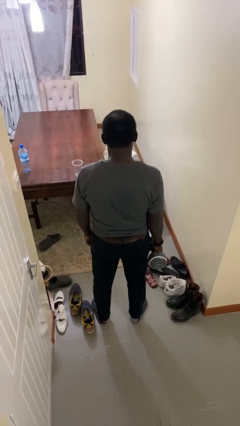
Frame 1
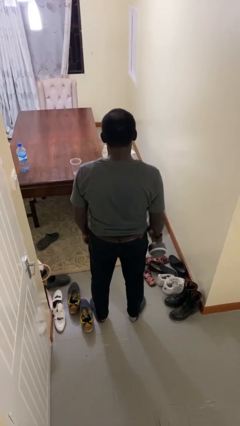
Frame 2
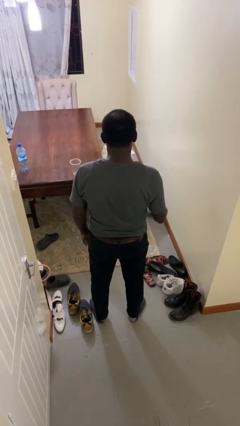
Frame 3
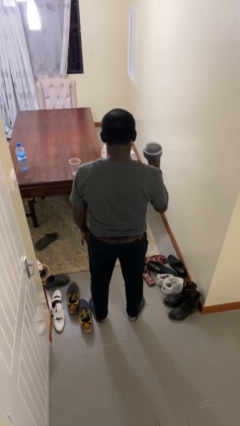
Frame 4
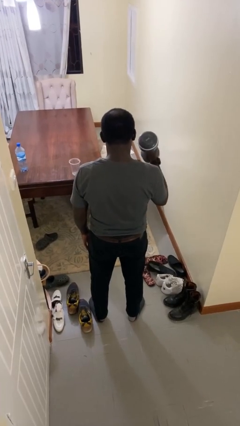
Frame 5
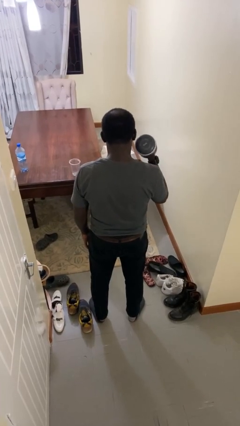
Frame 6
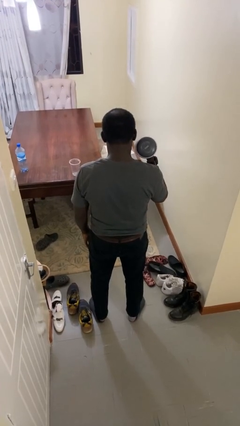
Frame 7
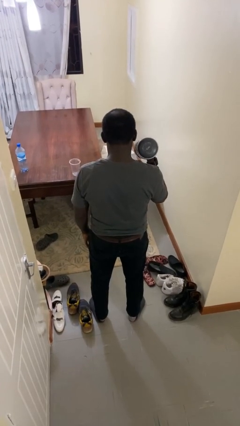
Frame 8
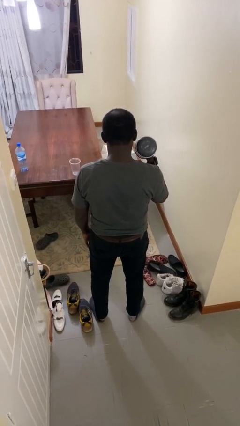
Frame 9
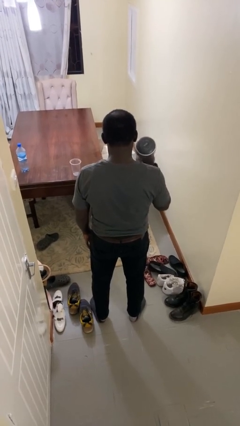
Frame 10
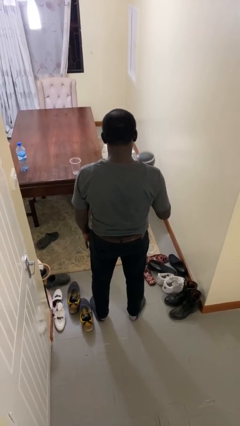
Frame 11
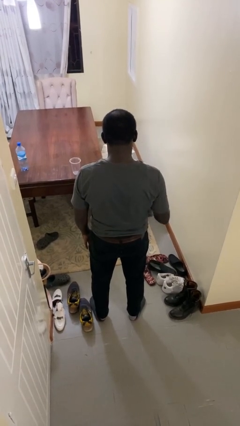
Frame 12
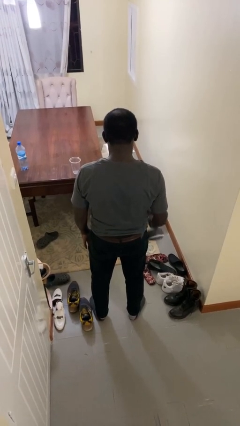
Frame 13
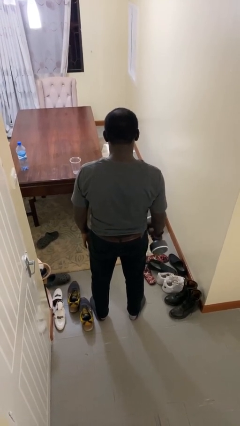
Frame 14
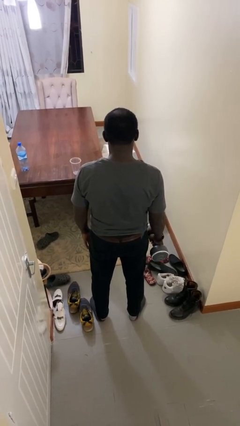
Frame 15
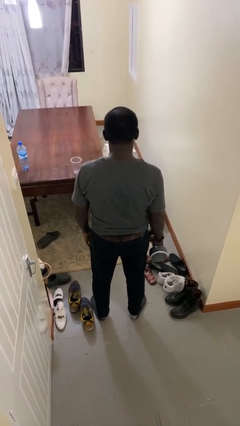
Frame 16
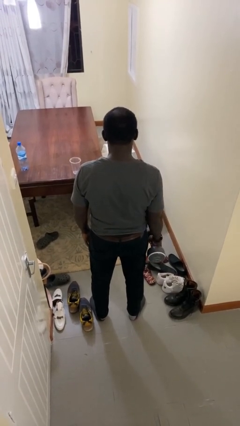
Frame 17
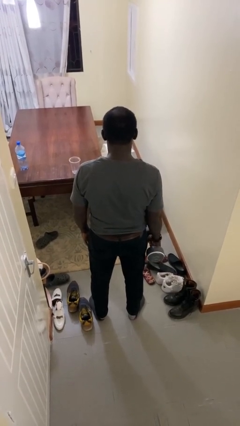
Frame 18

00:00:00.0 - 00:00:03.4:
person lifts dumbbells

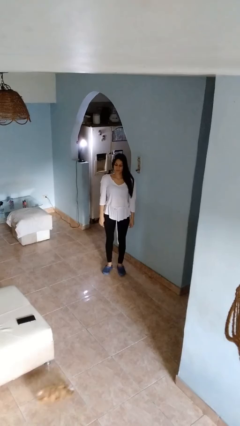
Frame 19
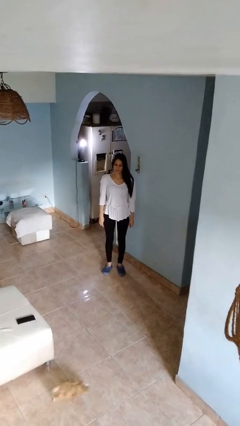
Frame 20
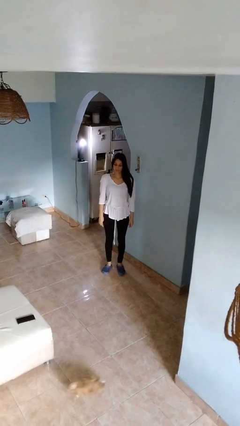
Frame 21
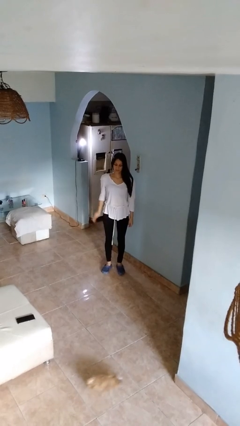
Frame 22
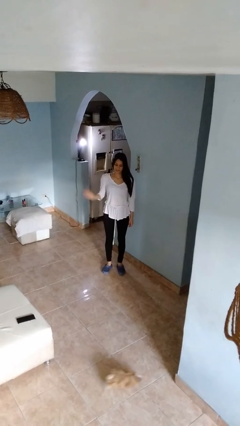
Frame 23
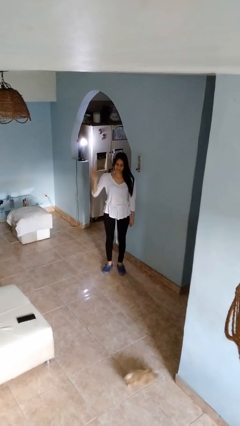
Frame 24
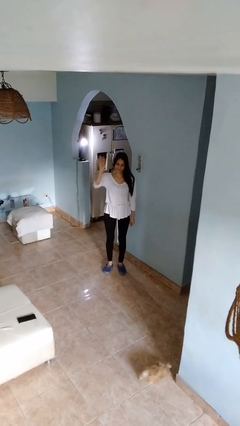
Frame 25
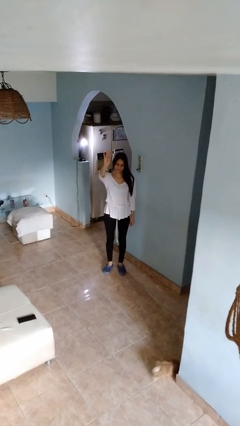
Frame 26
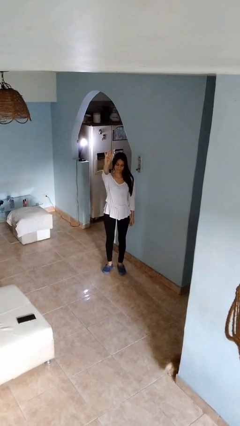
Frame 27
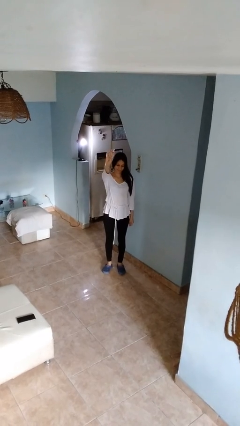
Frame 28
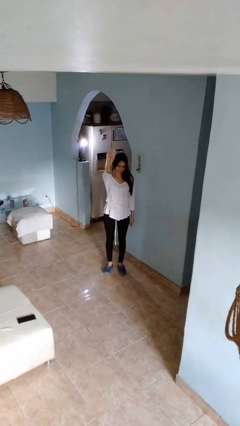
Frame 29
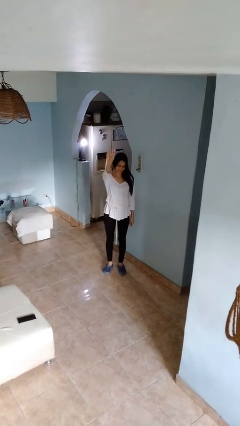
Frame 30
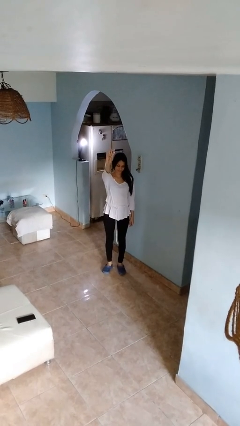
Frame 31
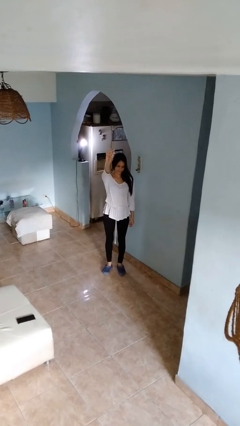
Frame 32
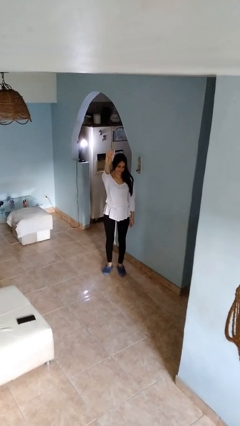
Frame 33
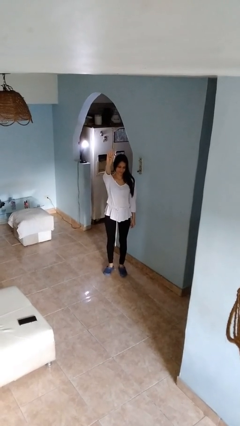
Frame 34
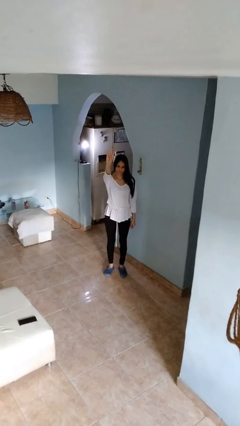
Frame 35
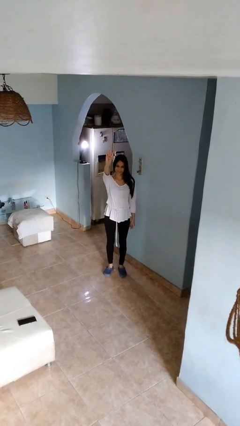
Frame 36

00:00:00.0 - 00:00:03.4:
person gestures number four

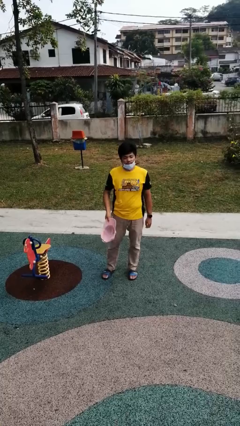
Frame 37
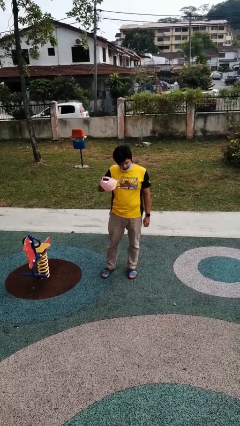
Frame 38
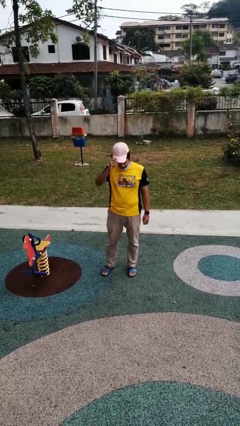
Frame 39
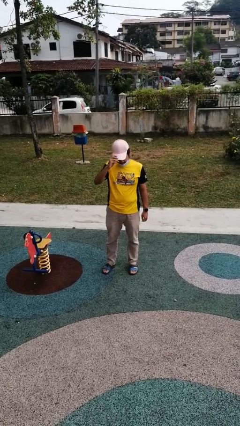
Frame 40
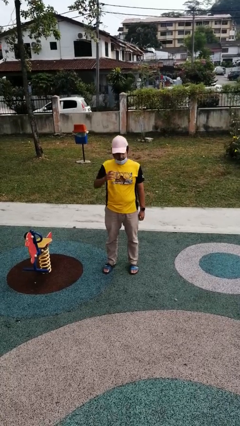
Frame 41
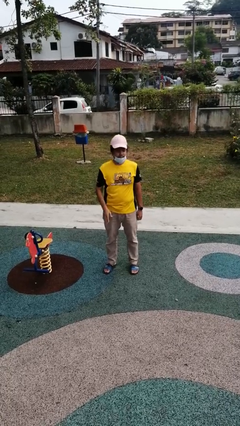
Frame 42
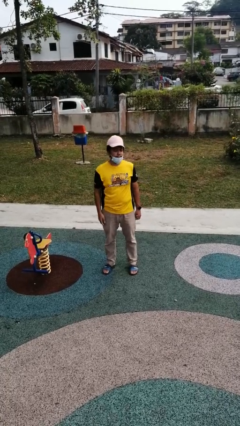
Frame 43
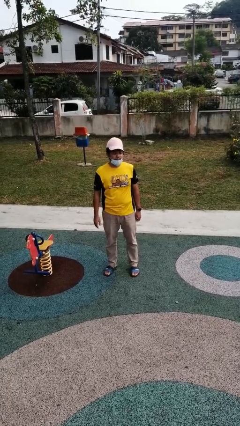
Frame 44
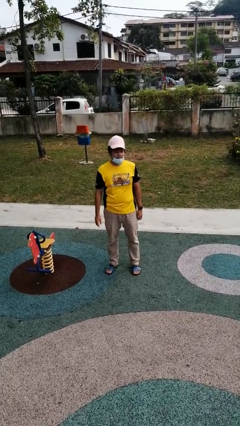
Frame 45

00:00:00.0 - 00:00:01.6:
person puts on hat

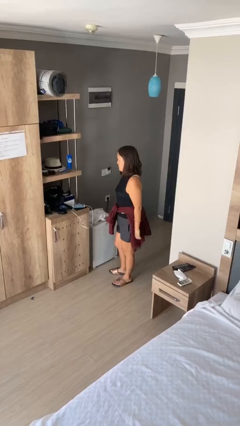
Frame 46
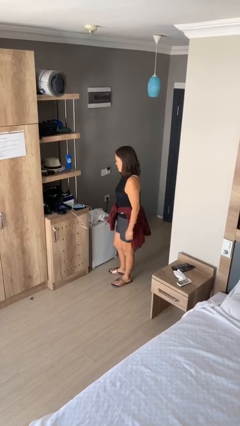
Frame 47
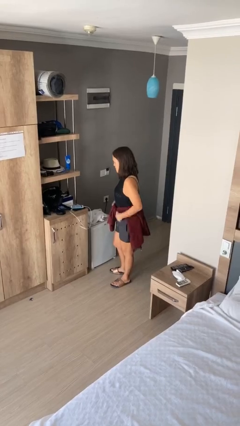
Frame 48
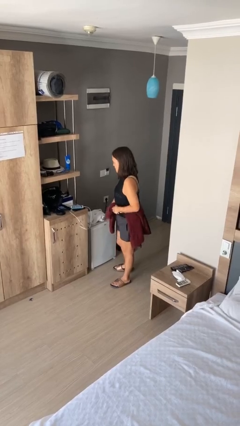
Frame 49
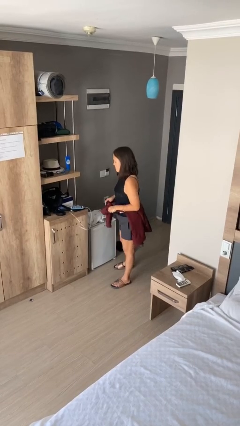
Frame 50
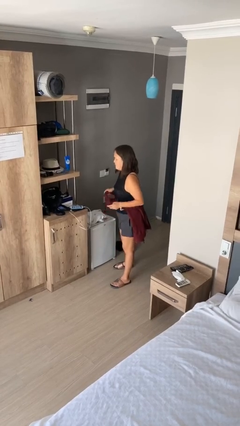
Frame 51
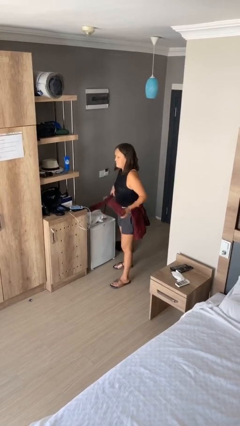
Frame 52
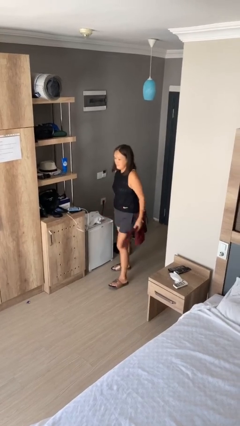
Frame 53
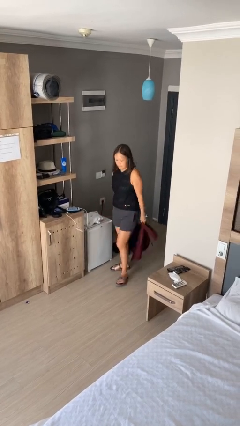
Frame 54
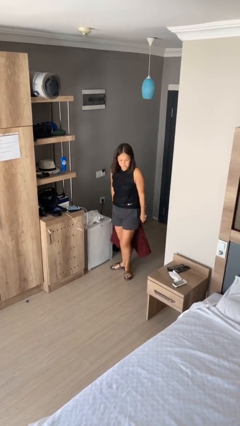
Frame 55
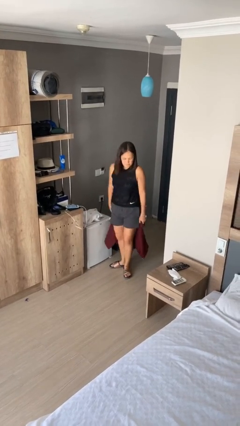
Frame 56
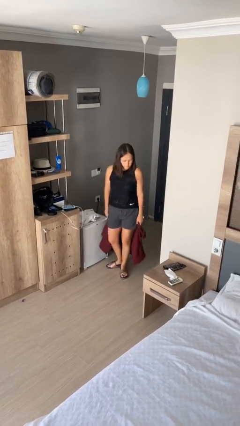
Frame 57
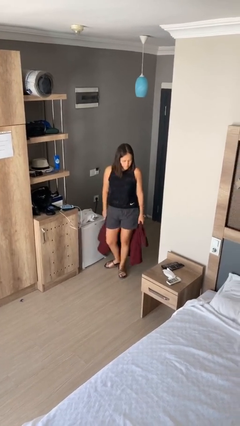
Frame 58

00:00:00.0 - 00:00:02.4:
person unties jacket around waist

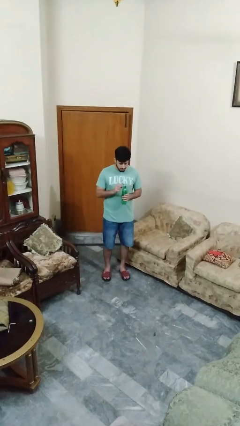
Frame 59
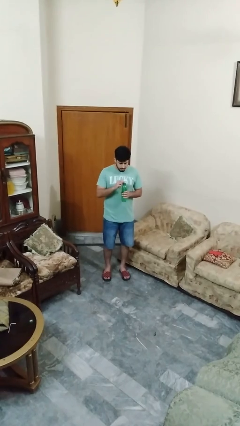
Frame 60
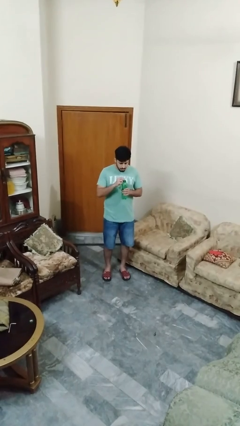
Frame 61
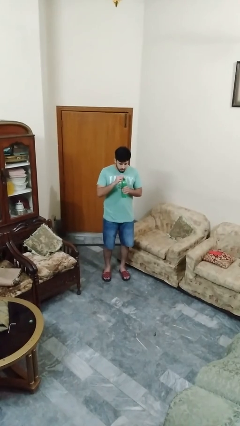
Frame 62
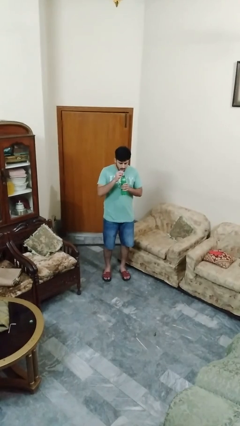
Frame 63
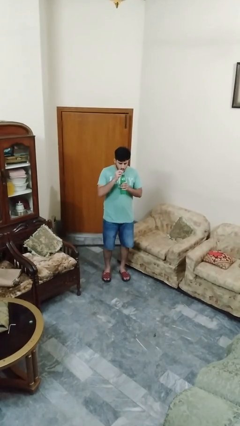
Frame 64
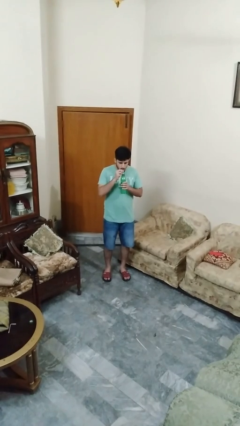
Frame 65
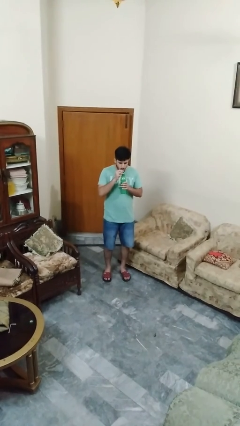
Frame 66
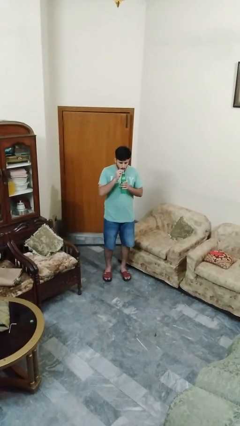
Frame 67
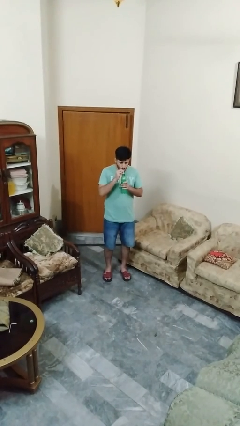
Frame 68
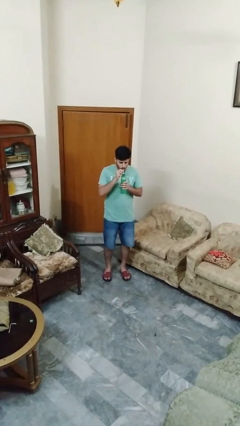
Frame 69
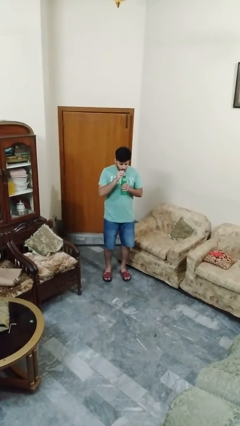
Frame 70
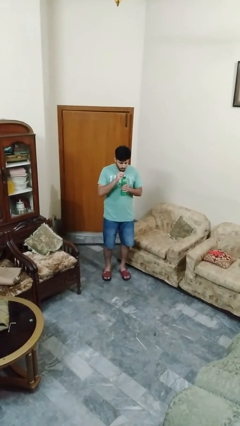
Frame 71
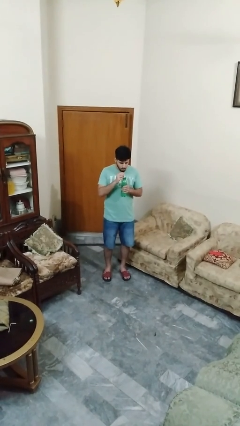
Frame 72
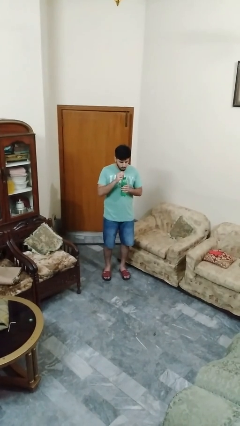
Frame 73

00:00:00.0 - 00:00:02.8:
person drinks from straw

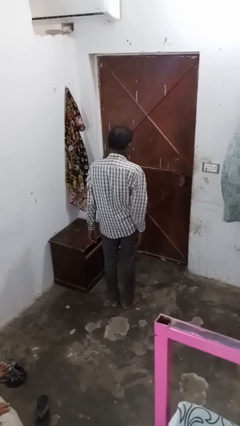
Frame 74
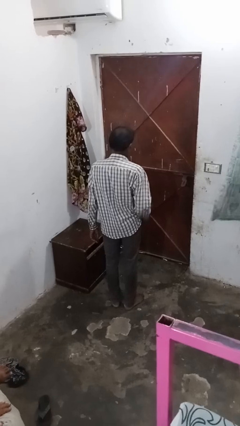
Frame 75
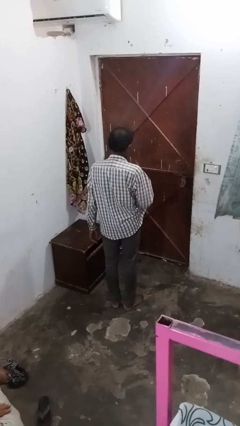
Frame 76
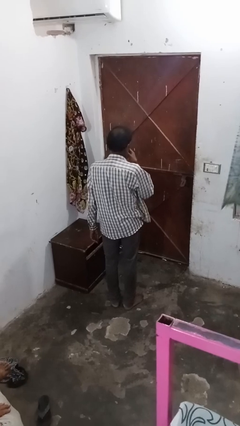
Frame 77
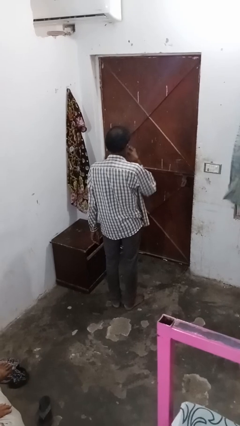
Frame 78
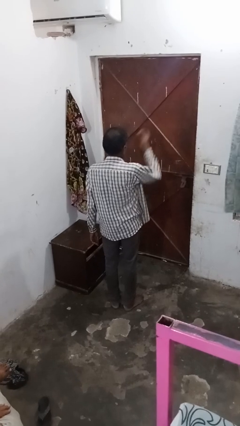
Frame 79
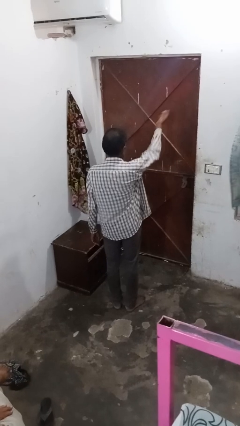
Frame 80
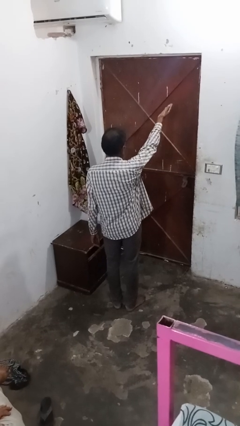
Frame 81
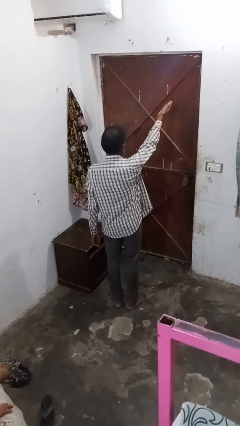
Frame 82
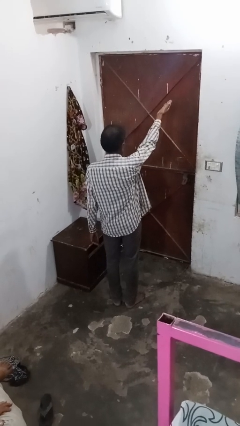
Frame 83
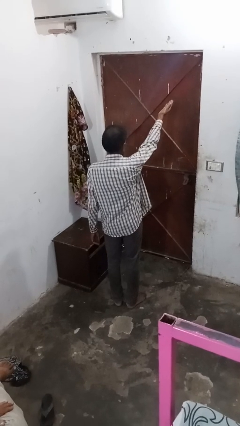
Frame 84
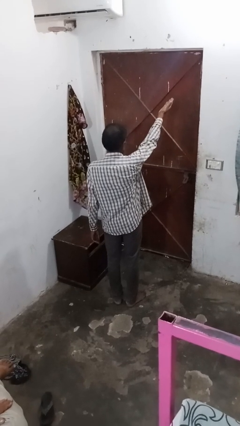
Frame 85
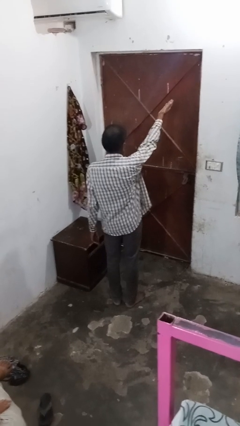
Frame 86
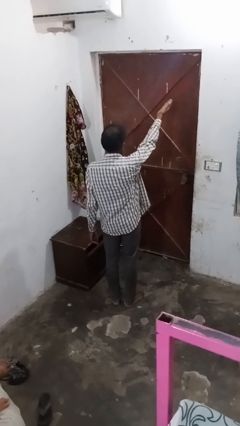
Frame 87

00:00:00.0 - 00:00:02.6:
person gestures blow kiss

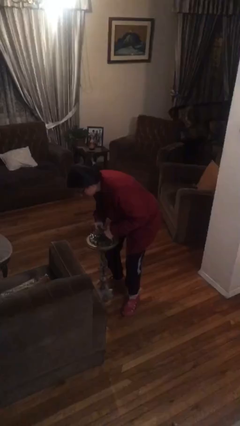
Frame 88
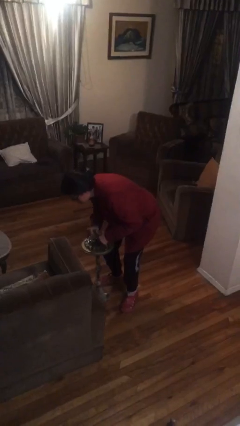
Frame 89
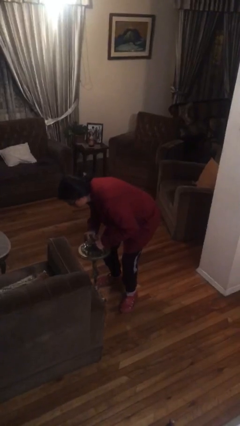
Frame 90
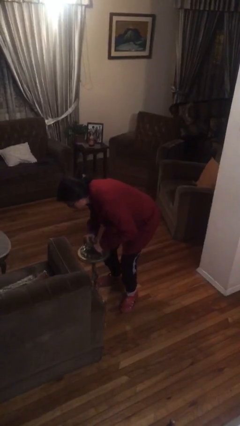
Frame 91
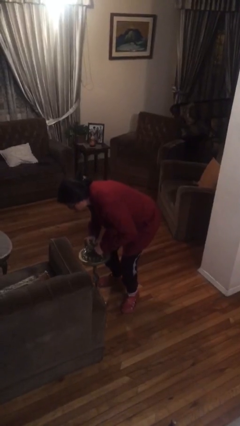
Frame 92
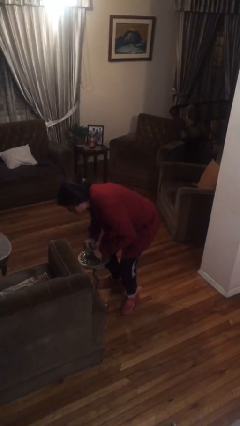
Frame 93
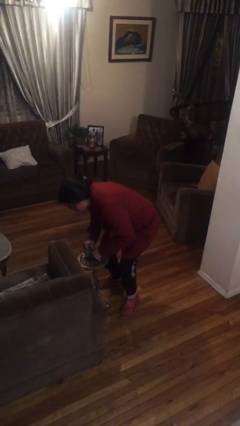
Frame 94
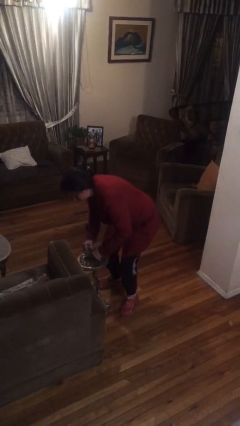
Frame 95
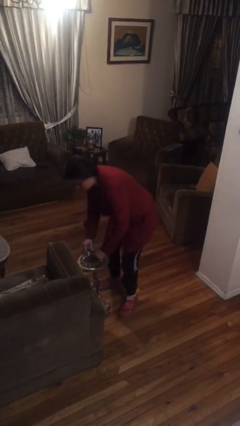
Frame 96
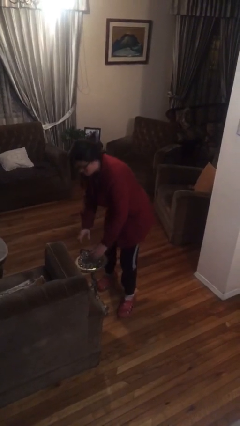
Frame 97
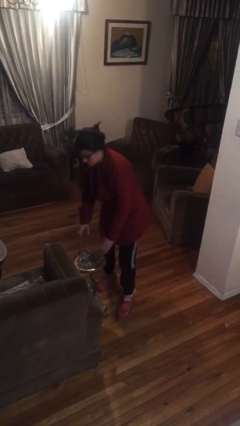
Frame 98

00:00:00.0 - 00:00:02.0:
person puts down object on floor
